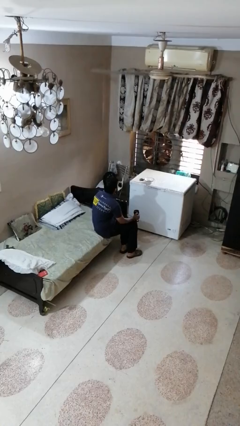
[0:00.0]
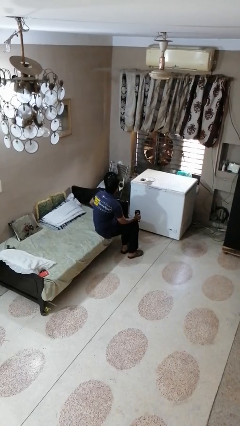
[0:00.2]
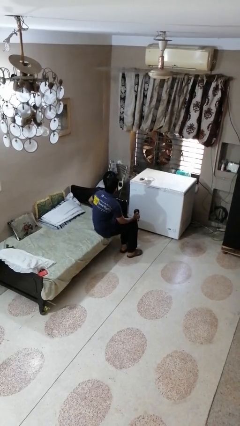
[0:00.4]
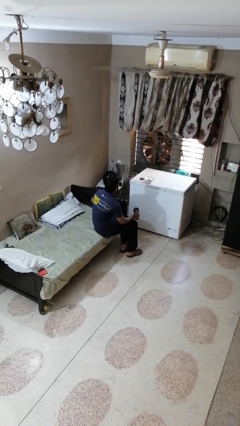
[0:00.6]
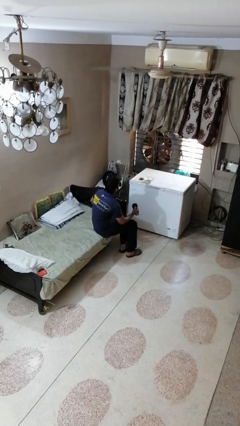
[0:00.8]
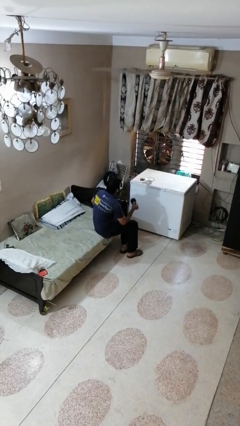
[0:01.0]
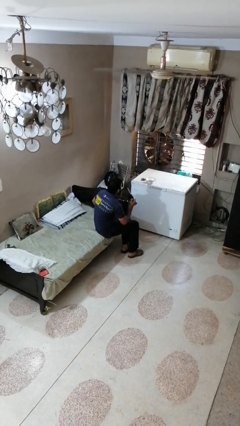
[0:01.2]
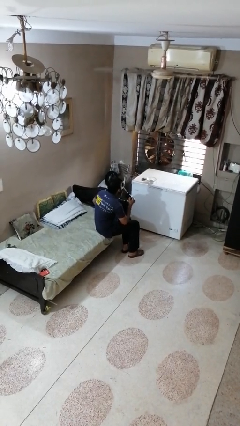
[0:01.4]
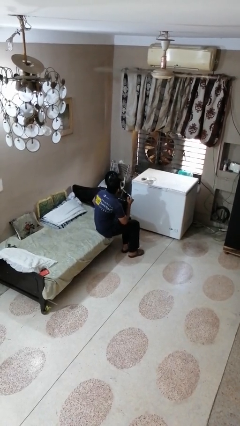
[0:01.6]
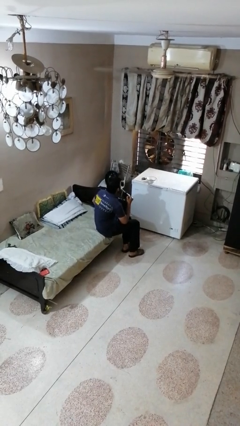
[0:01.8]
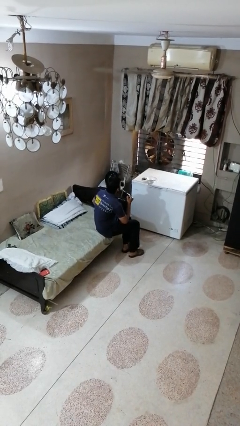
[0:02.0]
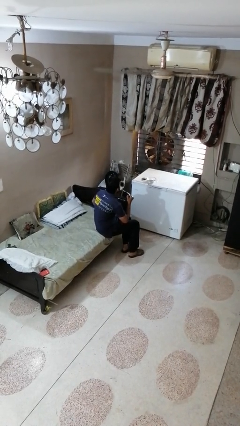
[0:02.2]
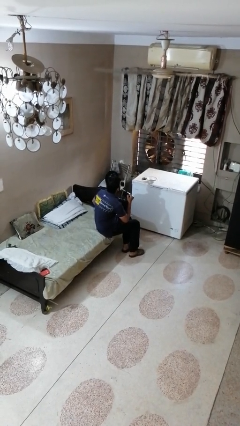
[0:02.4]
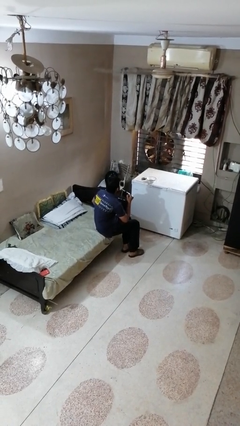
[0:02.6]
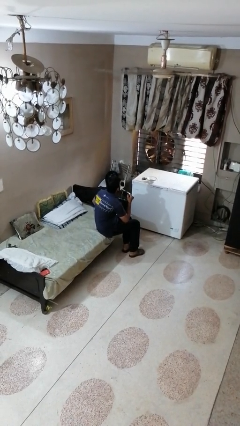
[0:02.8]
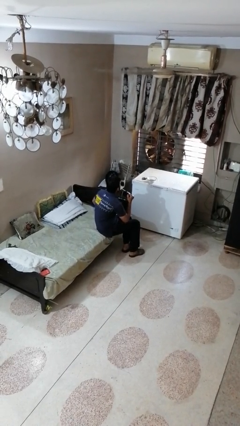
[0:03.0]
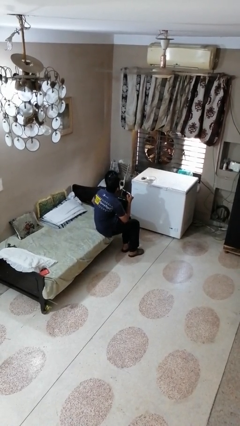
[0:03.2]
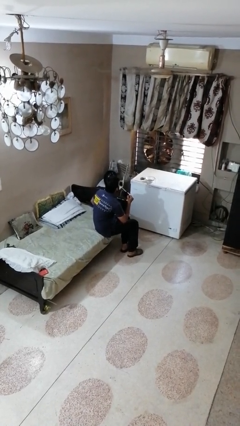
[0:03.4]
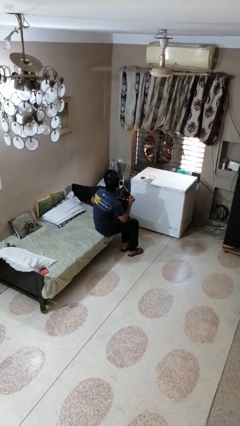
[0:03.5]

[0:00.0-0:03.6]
person drinks from straw

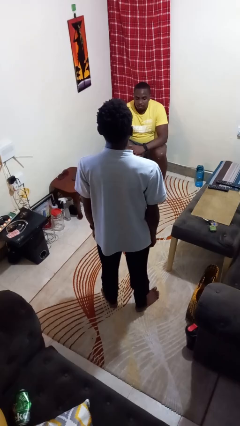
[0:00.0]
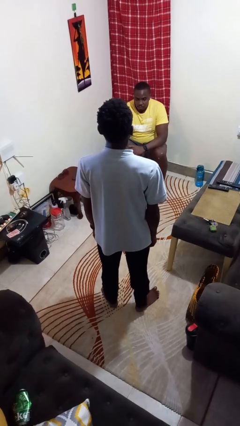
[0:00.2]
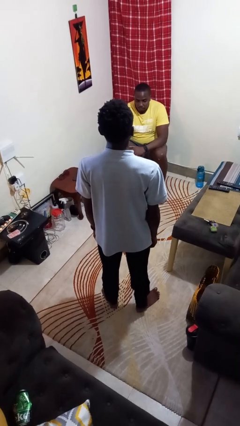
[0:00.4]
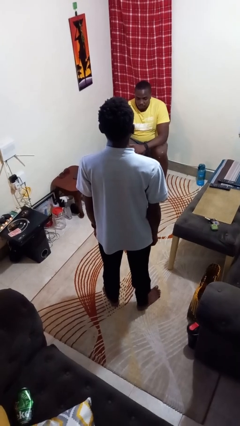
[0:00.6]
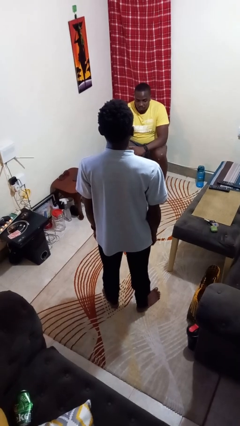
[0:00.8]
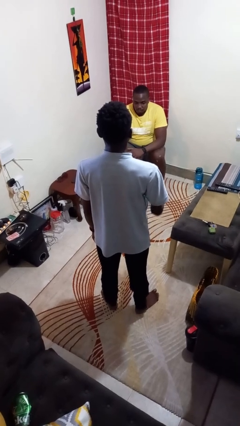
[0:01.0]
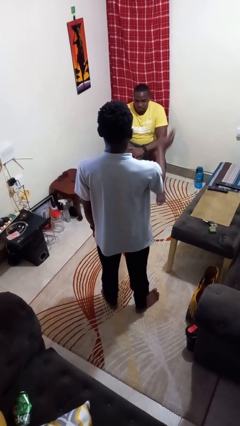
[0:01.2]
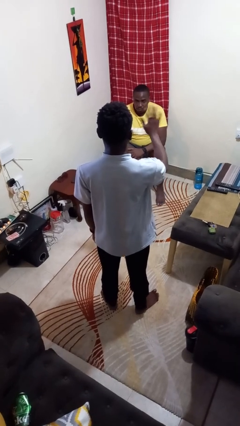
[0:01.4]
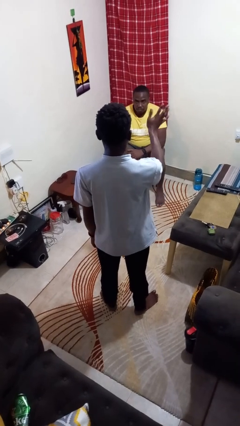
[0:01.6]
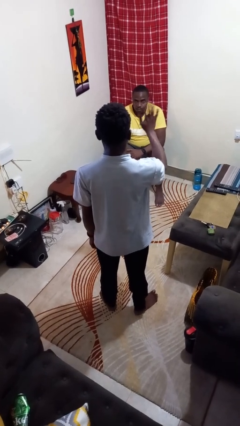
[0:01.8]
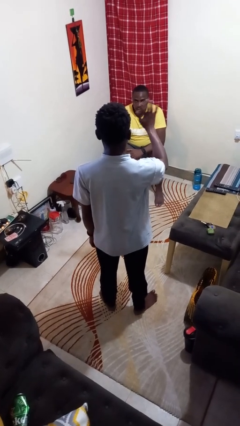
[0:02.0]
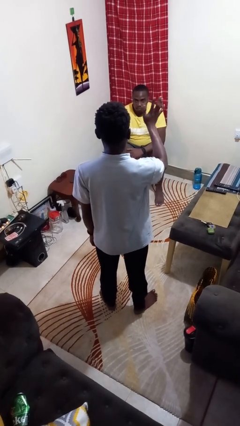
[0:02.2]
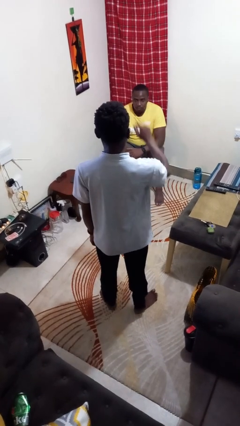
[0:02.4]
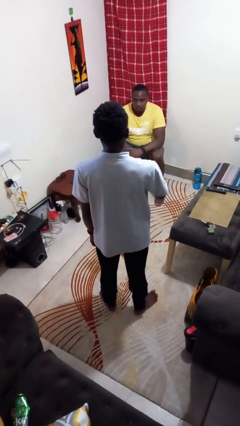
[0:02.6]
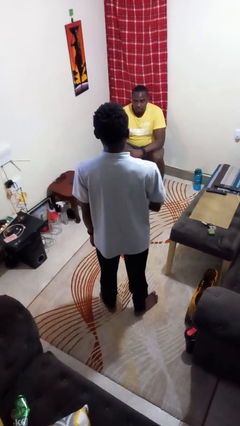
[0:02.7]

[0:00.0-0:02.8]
person waves at person

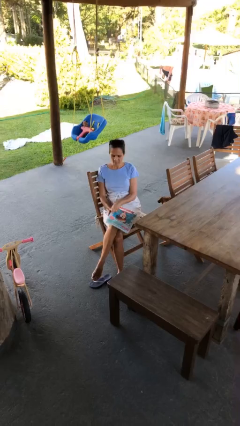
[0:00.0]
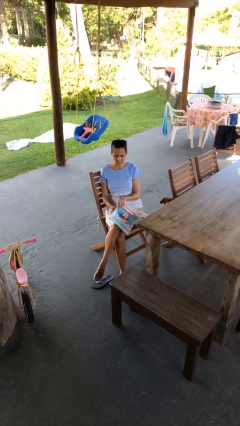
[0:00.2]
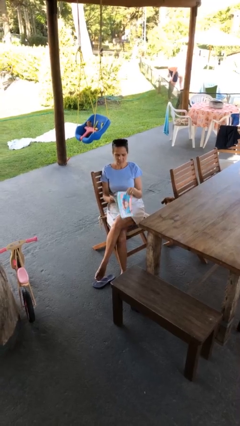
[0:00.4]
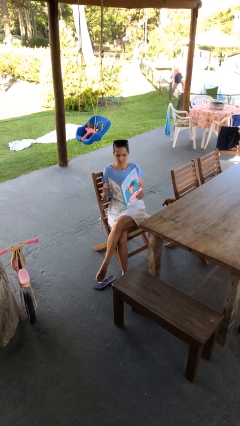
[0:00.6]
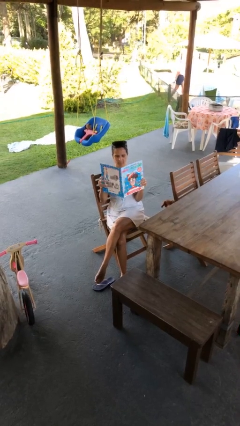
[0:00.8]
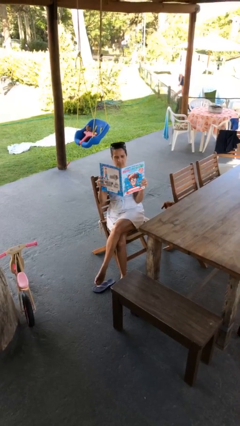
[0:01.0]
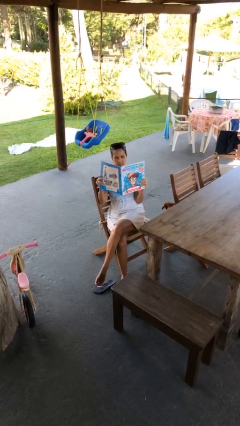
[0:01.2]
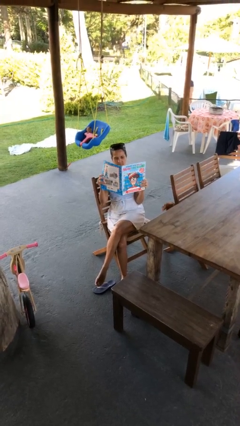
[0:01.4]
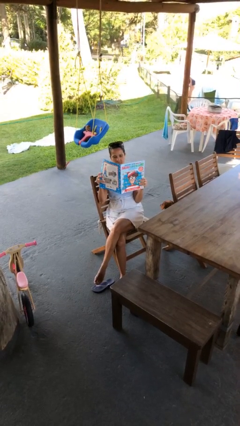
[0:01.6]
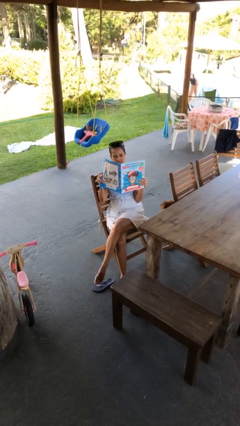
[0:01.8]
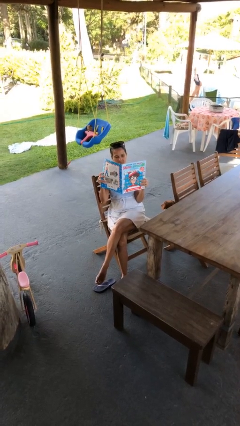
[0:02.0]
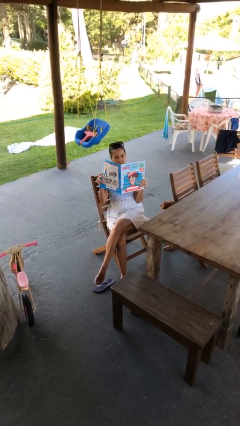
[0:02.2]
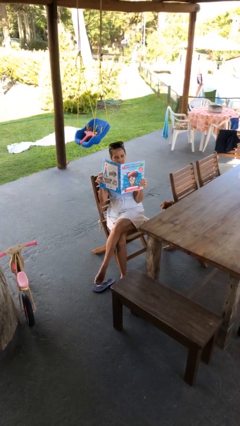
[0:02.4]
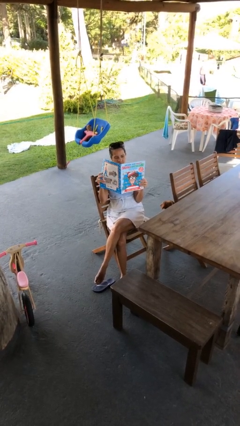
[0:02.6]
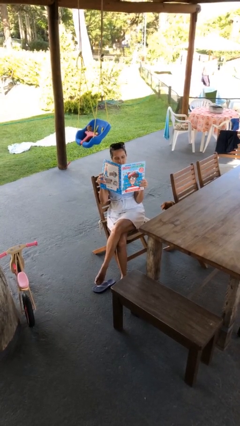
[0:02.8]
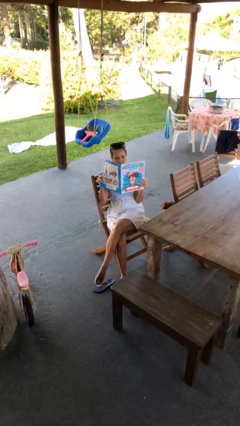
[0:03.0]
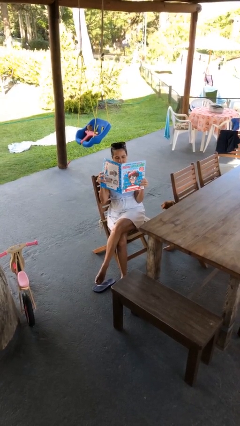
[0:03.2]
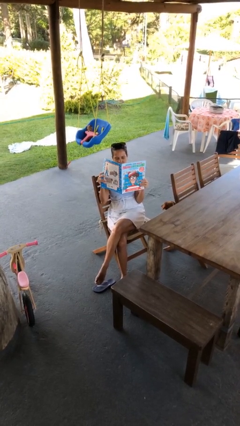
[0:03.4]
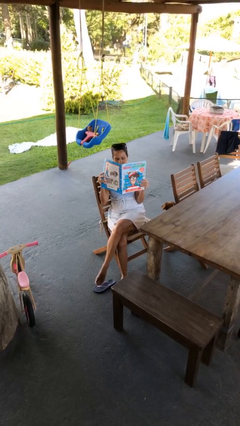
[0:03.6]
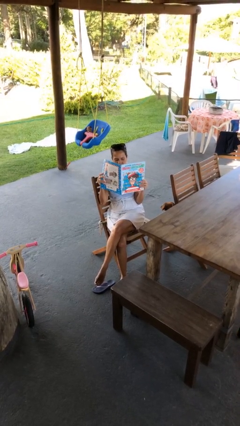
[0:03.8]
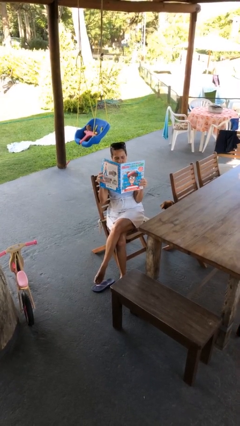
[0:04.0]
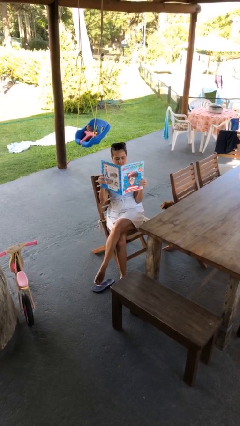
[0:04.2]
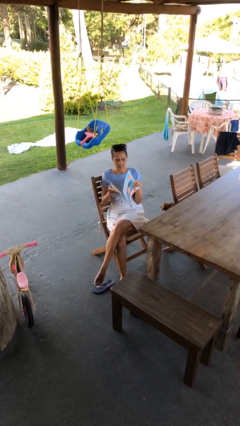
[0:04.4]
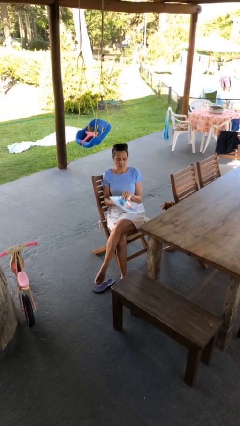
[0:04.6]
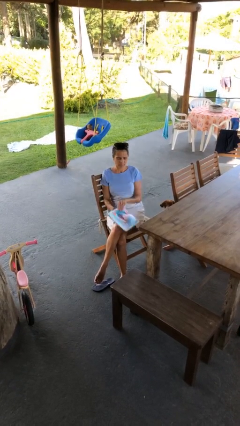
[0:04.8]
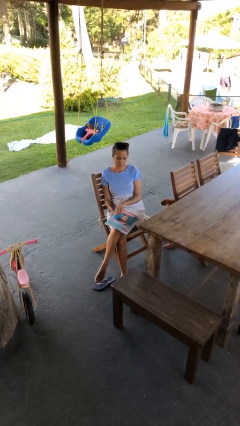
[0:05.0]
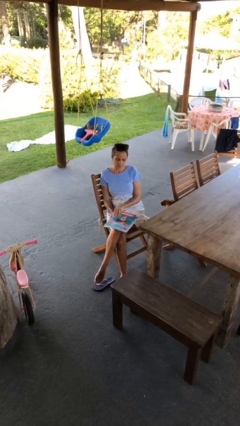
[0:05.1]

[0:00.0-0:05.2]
person reads document

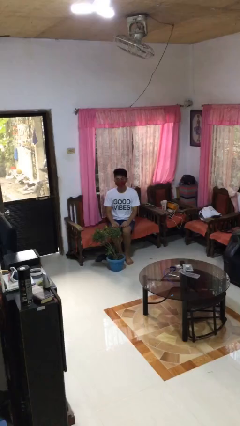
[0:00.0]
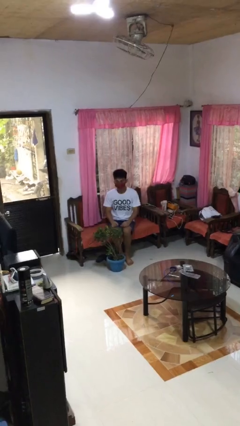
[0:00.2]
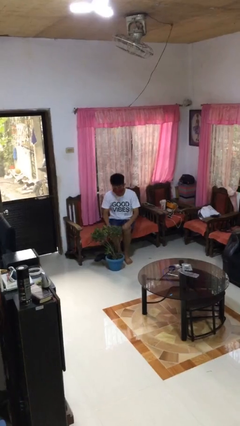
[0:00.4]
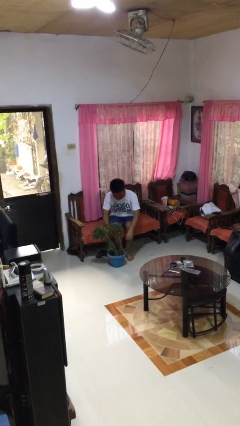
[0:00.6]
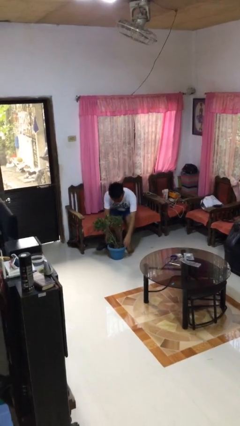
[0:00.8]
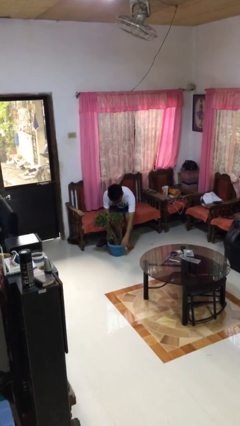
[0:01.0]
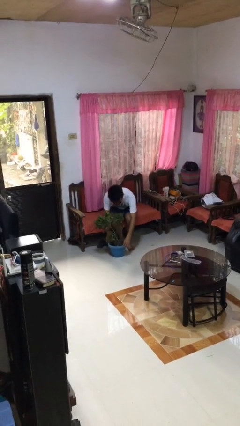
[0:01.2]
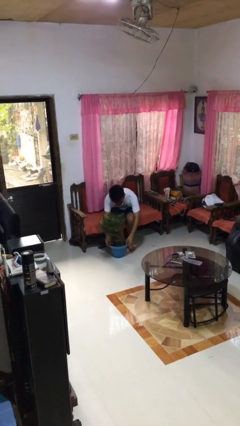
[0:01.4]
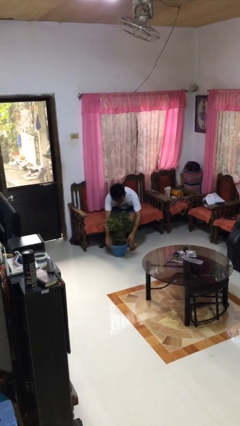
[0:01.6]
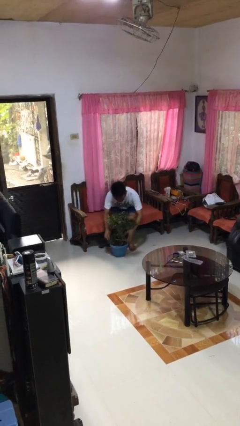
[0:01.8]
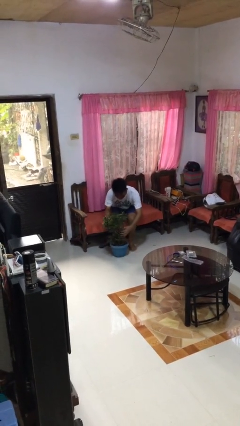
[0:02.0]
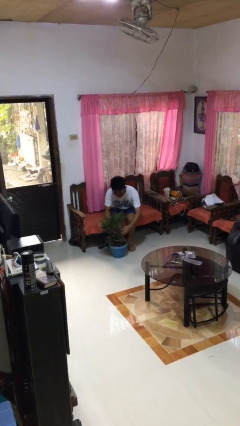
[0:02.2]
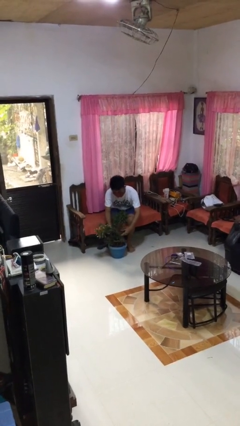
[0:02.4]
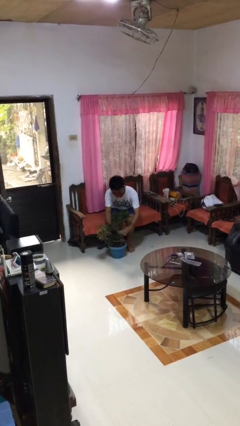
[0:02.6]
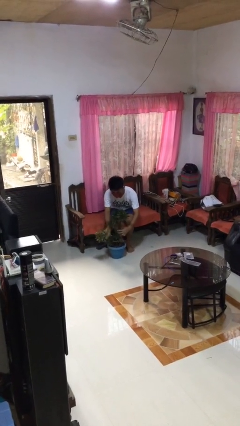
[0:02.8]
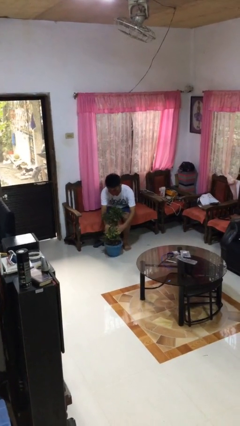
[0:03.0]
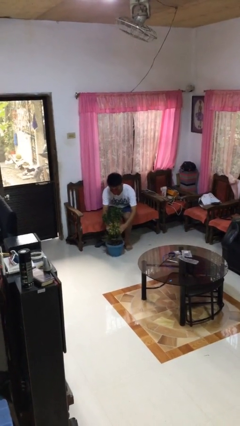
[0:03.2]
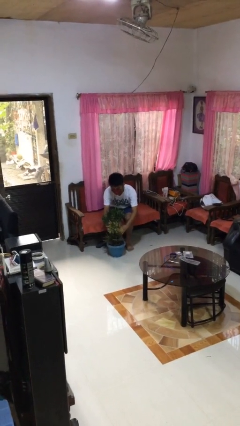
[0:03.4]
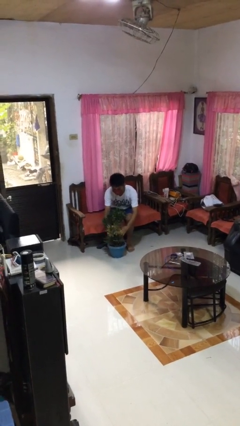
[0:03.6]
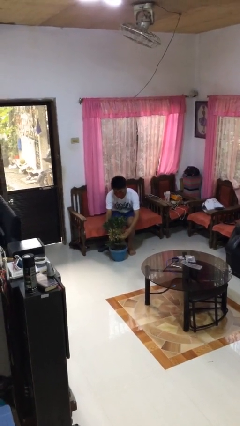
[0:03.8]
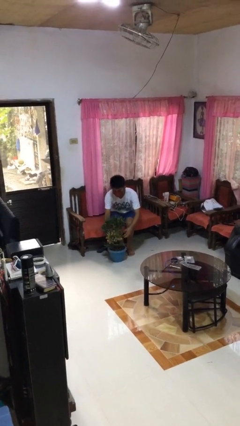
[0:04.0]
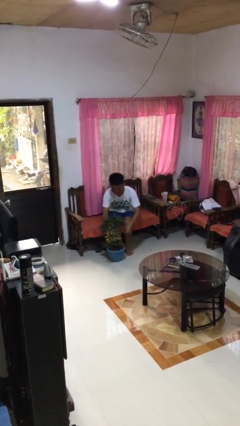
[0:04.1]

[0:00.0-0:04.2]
person arranges flowers in vase

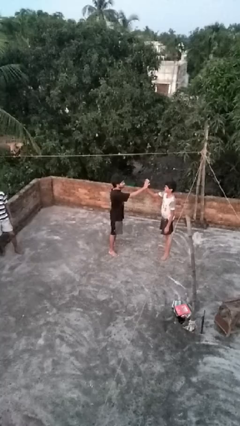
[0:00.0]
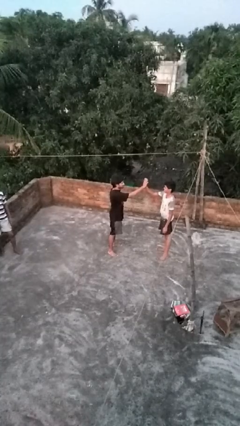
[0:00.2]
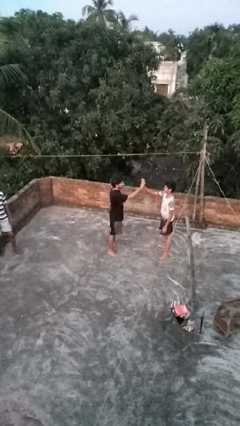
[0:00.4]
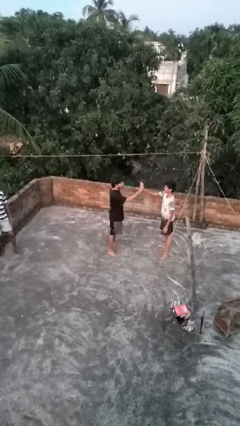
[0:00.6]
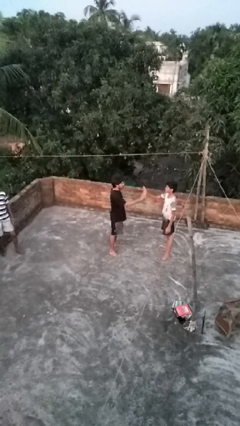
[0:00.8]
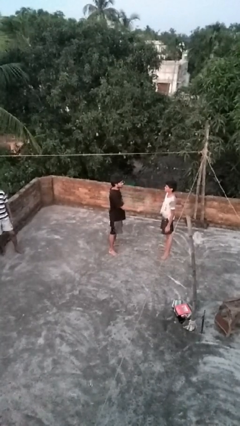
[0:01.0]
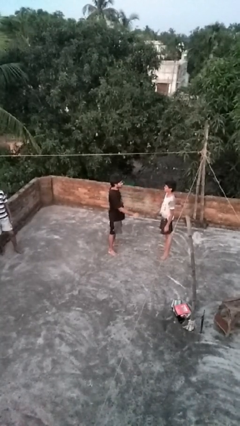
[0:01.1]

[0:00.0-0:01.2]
person highfives hand

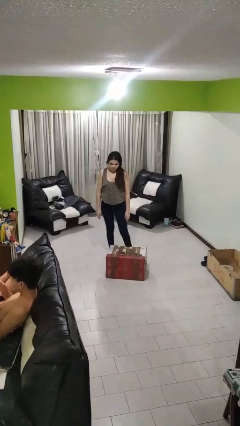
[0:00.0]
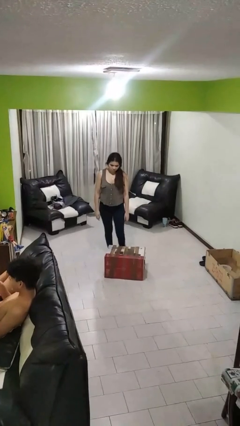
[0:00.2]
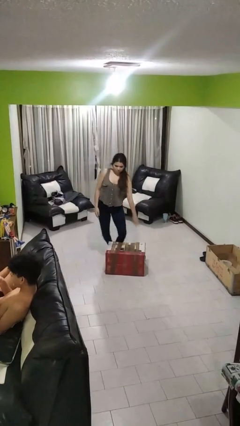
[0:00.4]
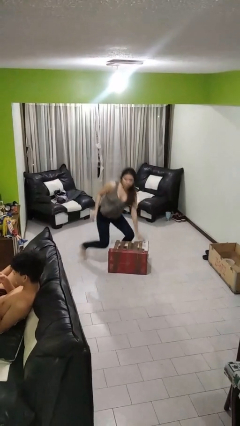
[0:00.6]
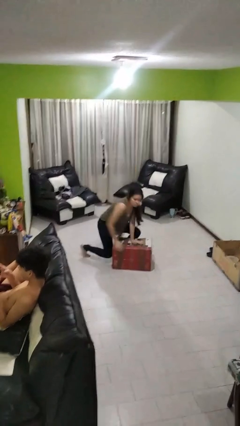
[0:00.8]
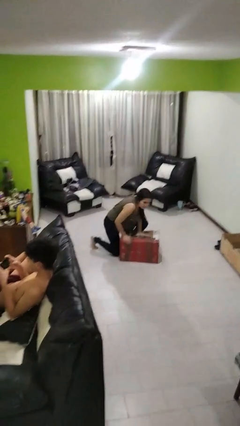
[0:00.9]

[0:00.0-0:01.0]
person trips on object on floor
